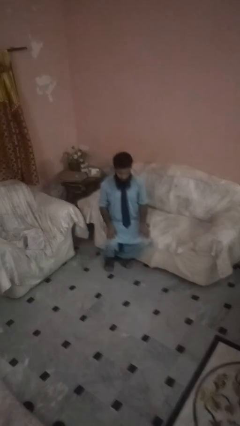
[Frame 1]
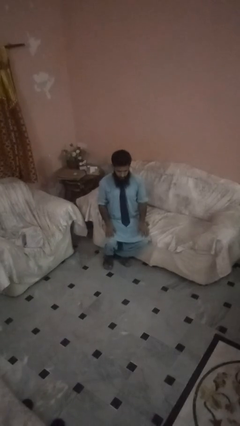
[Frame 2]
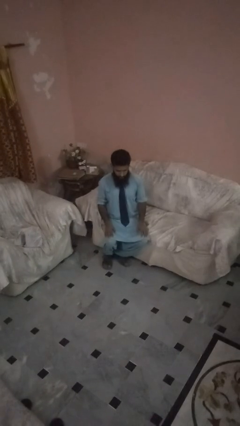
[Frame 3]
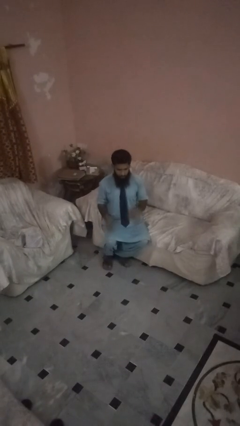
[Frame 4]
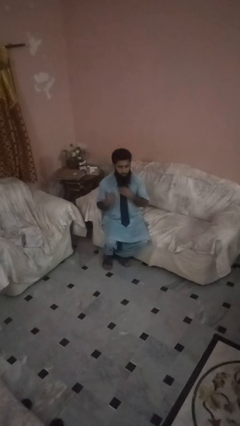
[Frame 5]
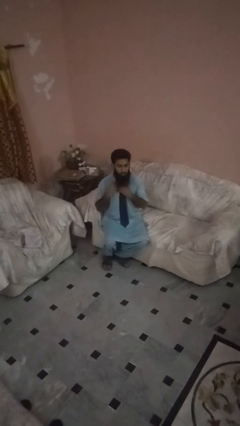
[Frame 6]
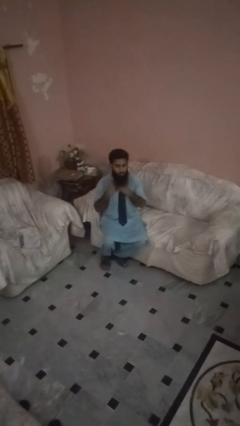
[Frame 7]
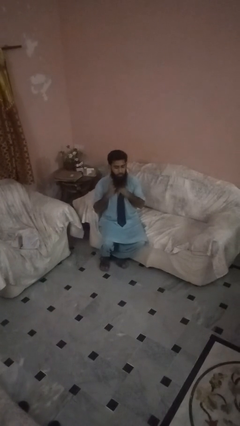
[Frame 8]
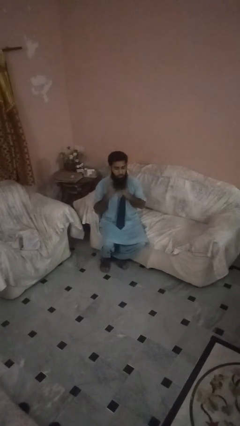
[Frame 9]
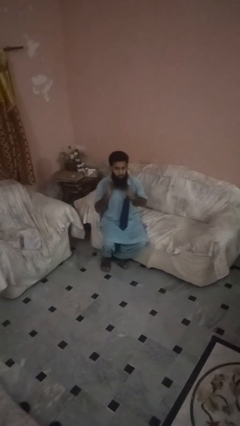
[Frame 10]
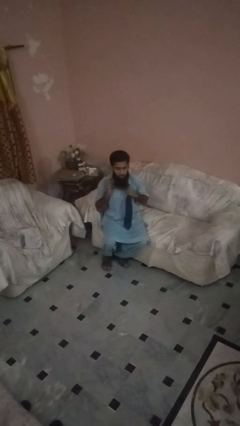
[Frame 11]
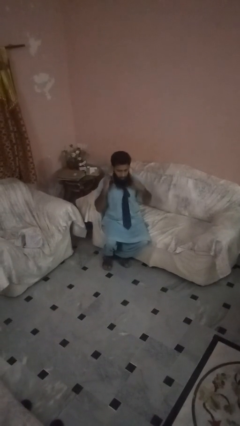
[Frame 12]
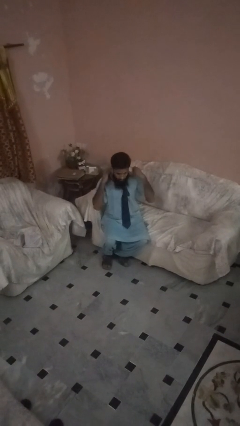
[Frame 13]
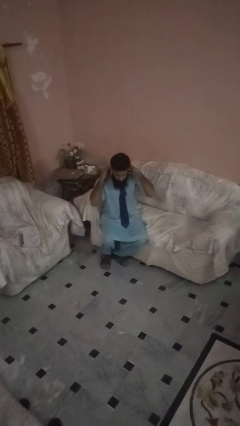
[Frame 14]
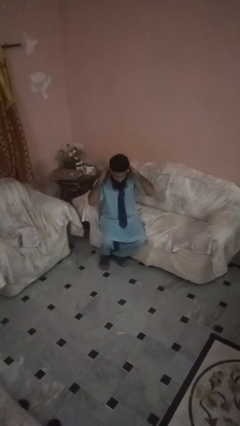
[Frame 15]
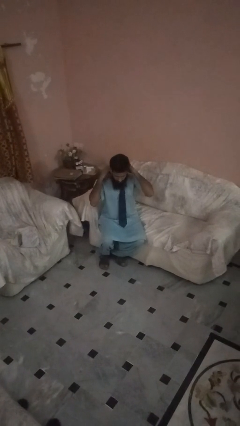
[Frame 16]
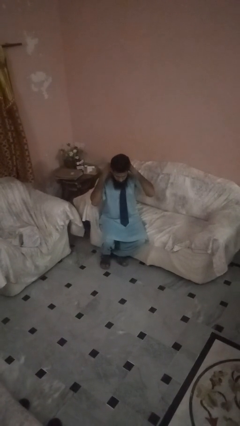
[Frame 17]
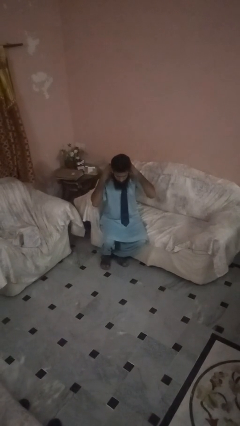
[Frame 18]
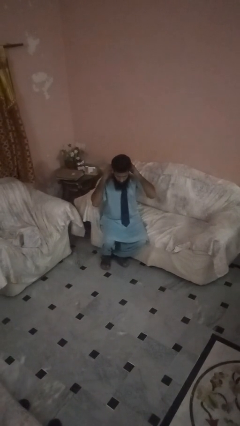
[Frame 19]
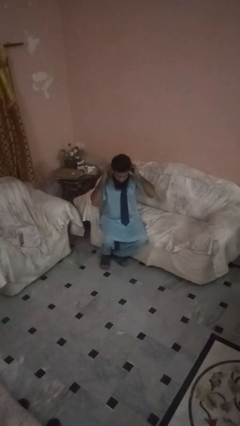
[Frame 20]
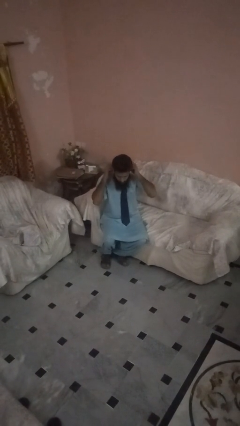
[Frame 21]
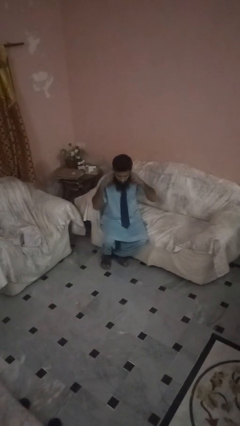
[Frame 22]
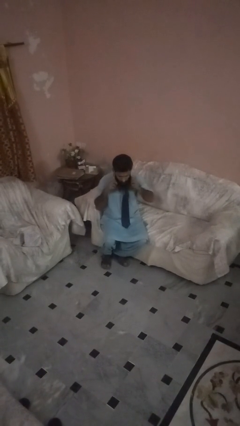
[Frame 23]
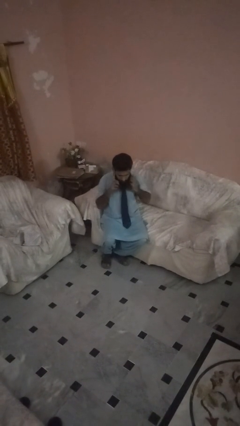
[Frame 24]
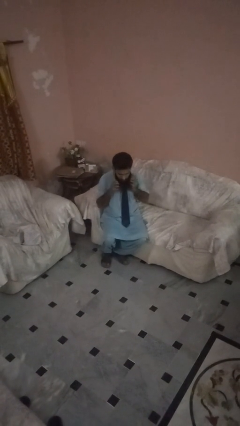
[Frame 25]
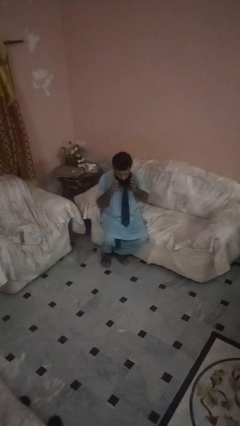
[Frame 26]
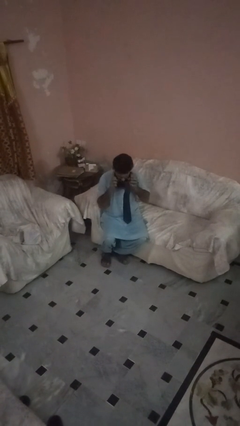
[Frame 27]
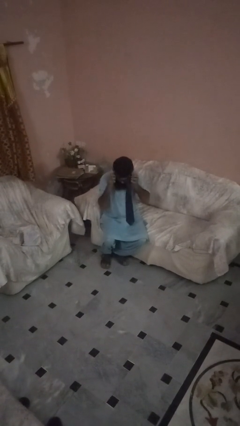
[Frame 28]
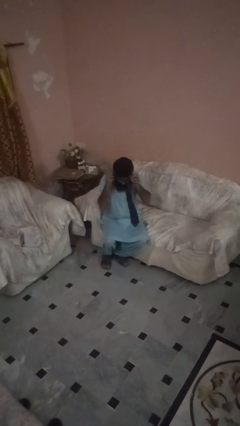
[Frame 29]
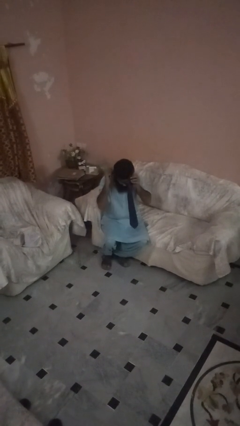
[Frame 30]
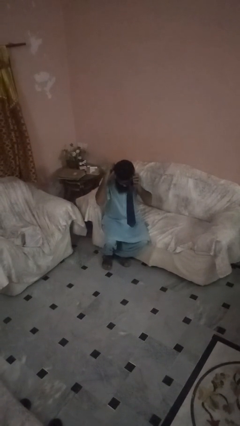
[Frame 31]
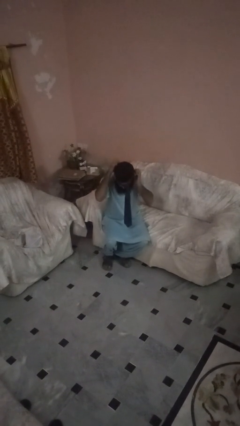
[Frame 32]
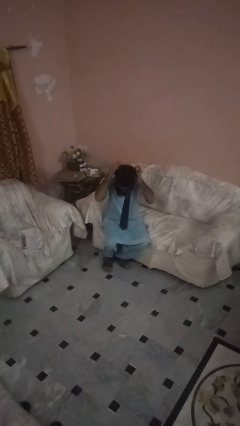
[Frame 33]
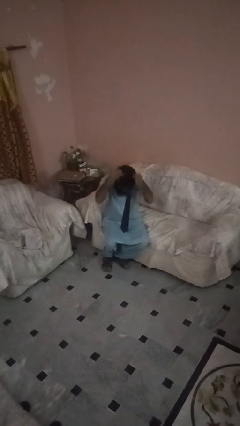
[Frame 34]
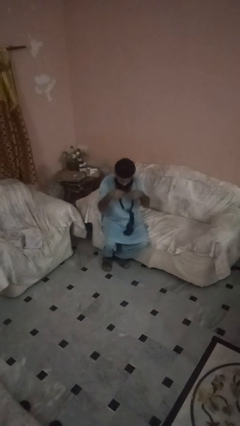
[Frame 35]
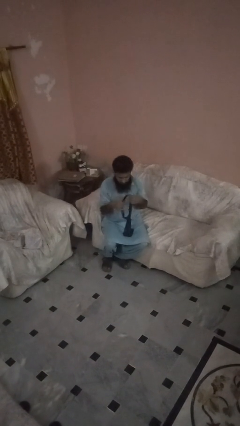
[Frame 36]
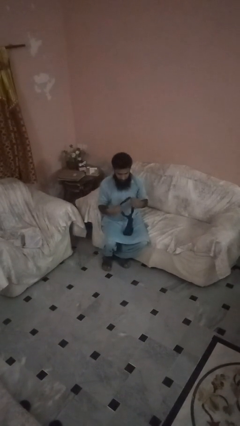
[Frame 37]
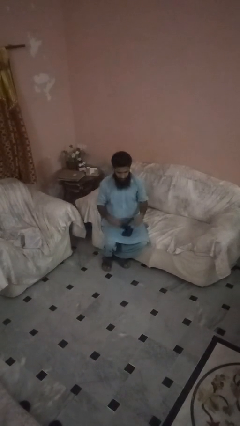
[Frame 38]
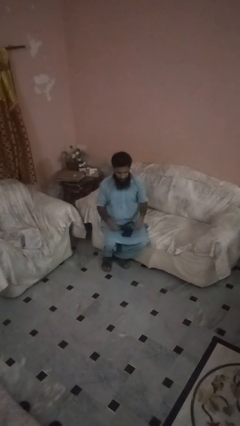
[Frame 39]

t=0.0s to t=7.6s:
person takes off necktie

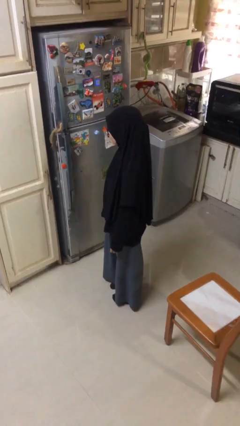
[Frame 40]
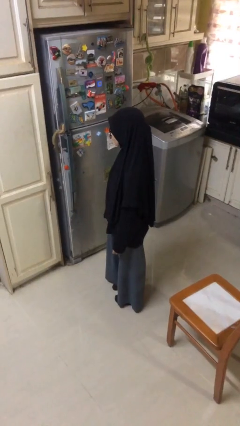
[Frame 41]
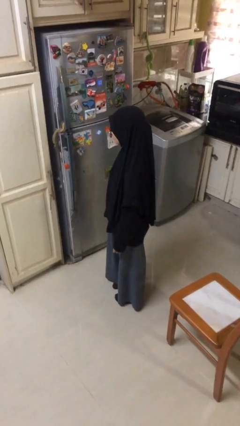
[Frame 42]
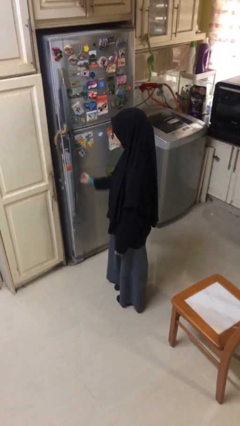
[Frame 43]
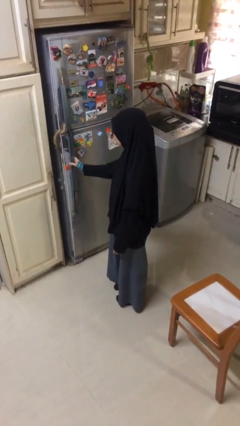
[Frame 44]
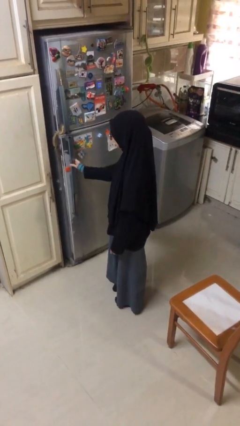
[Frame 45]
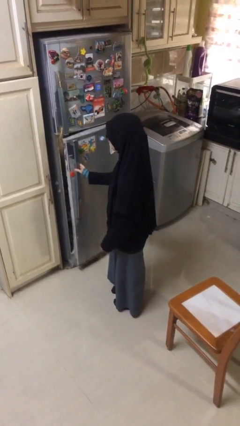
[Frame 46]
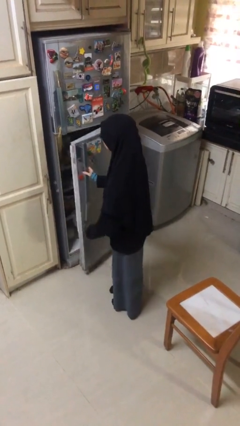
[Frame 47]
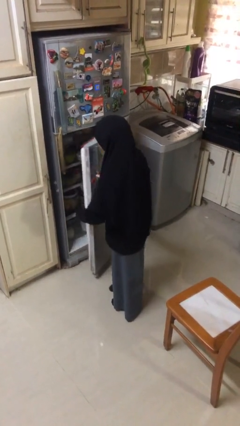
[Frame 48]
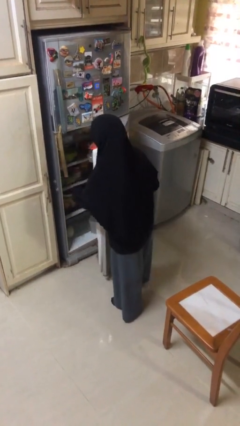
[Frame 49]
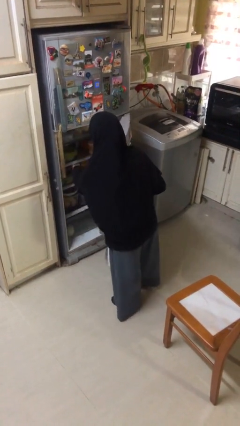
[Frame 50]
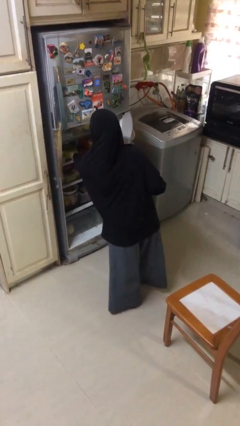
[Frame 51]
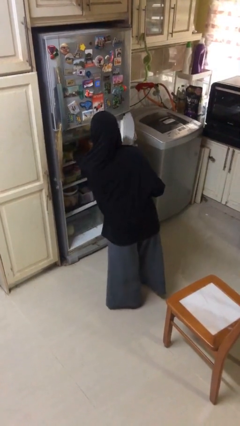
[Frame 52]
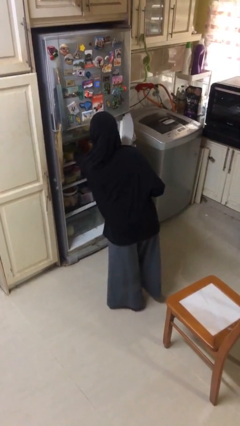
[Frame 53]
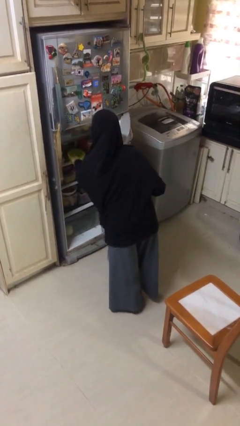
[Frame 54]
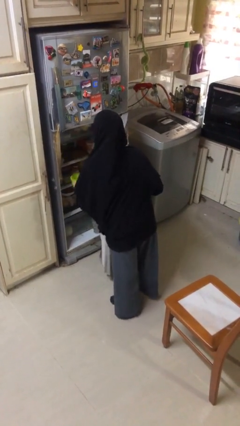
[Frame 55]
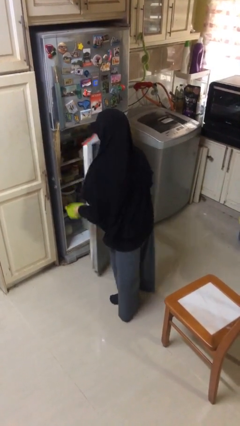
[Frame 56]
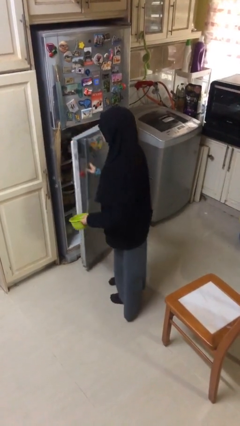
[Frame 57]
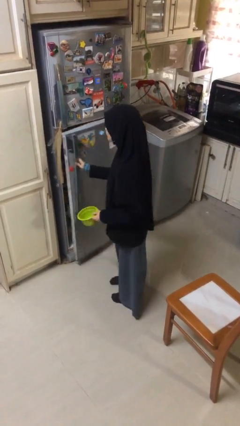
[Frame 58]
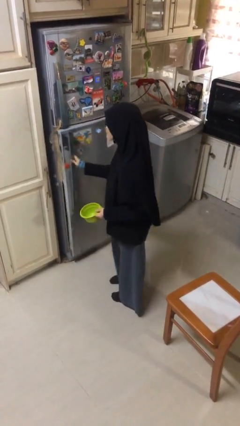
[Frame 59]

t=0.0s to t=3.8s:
person takes object from refrigerator

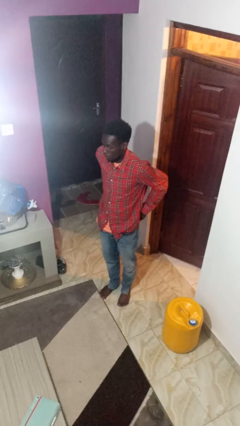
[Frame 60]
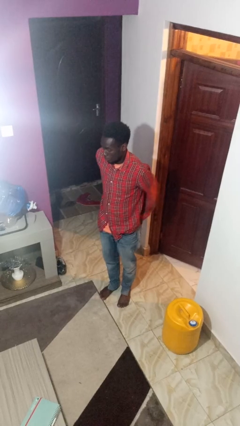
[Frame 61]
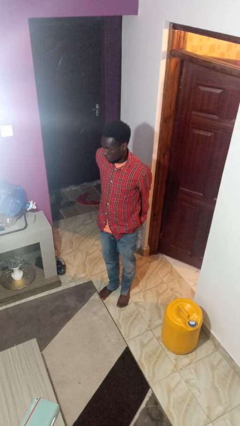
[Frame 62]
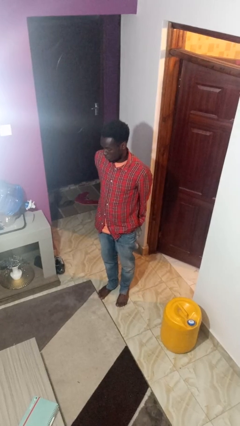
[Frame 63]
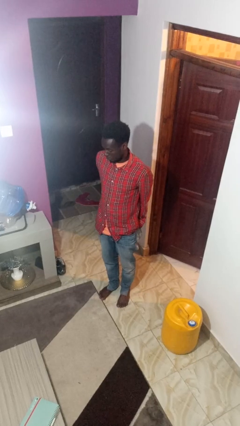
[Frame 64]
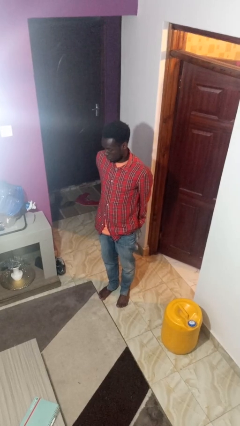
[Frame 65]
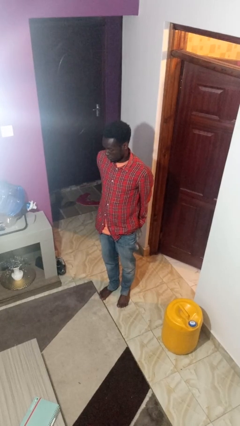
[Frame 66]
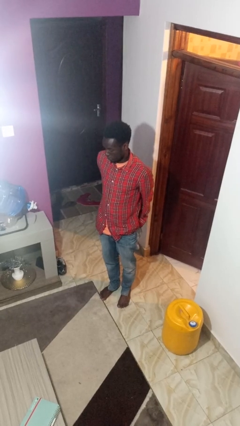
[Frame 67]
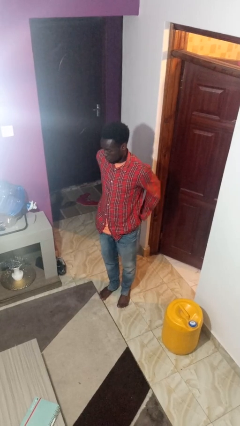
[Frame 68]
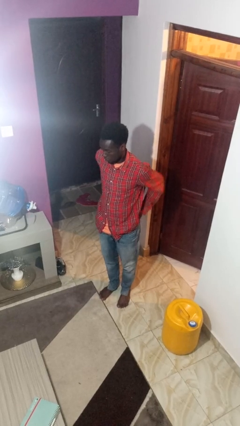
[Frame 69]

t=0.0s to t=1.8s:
person puts hands in back pockets

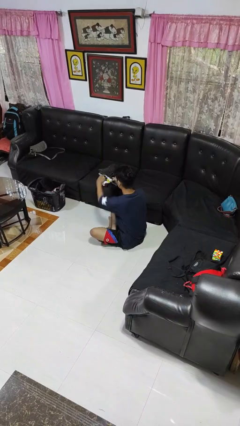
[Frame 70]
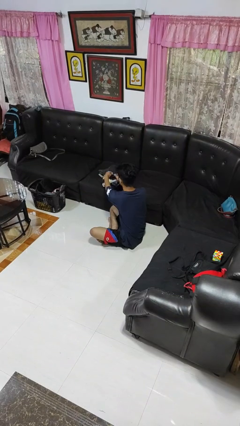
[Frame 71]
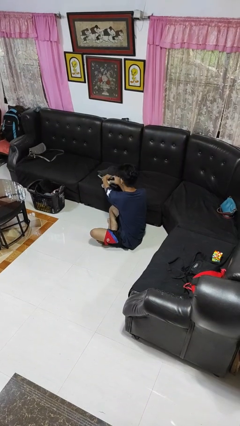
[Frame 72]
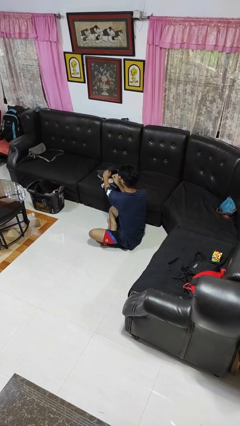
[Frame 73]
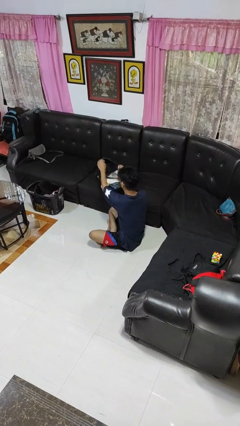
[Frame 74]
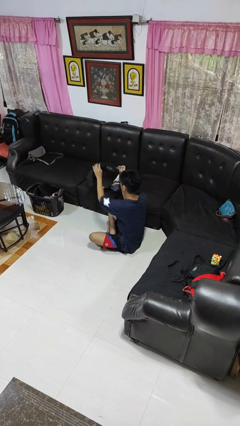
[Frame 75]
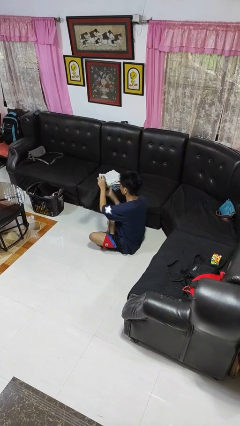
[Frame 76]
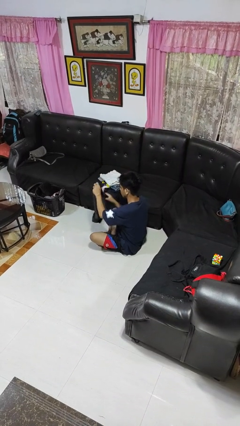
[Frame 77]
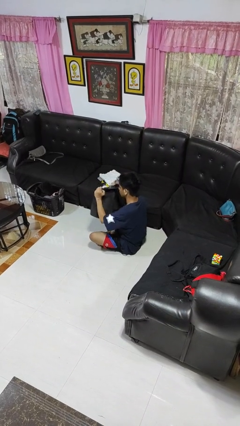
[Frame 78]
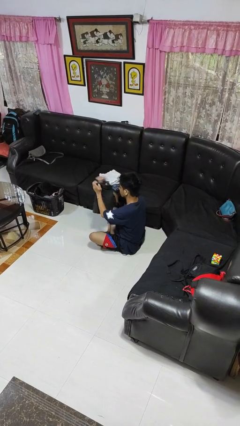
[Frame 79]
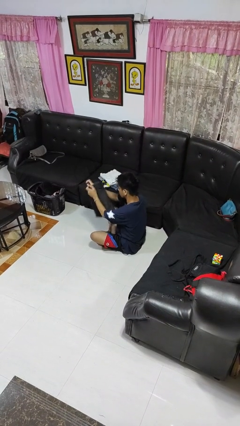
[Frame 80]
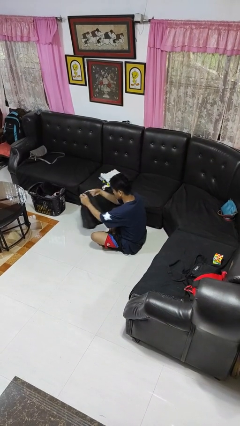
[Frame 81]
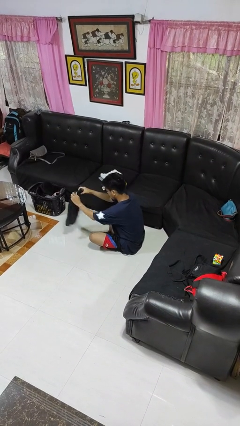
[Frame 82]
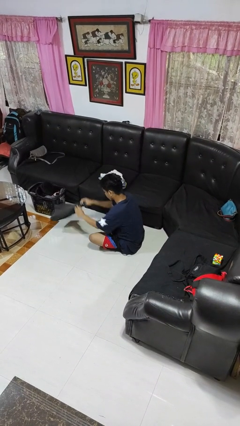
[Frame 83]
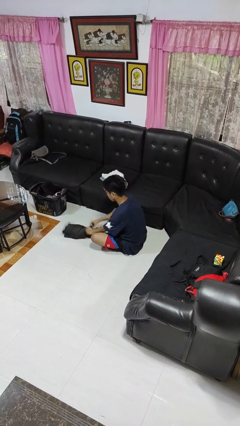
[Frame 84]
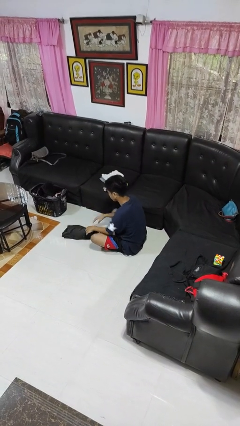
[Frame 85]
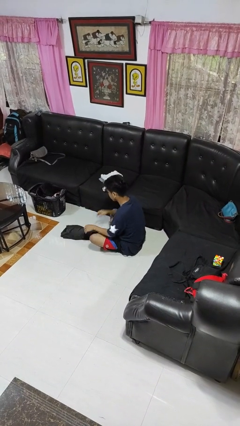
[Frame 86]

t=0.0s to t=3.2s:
person folds pants

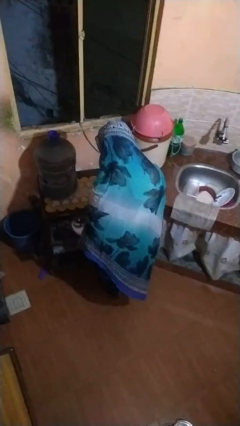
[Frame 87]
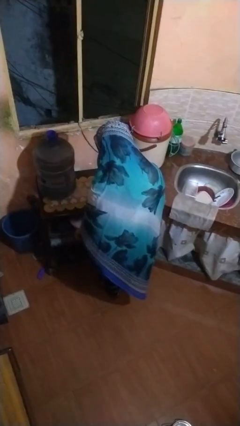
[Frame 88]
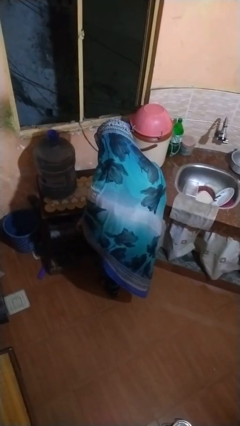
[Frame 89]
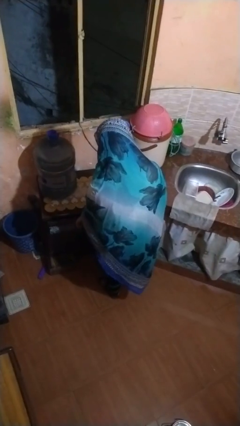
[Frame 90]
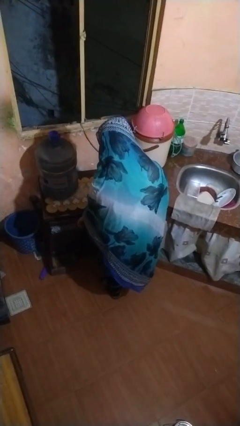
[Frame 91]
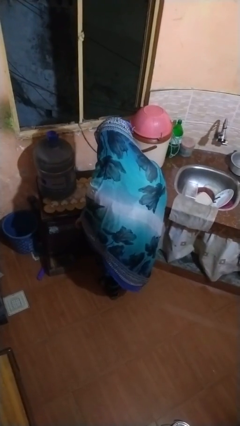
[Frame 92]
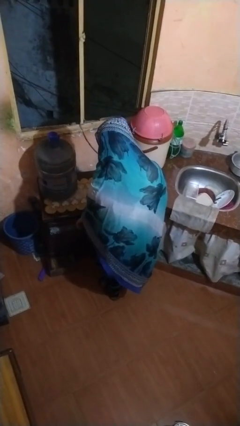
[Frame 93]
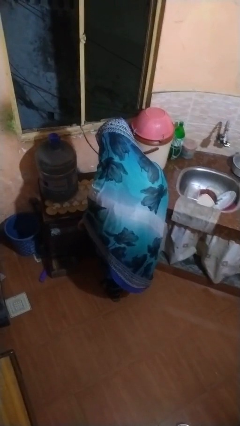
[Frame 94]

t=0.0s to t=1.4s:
person closes kitchen drawer
